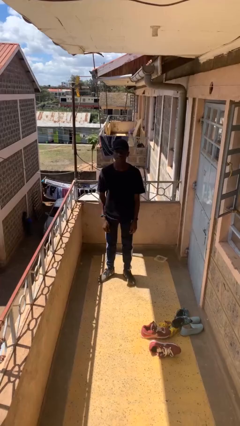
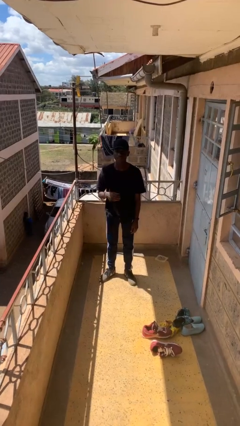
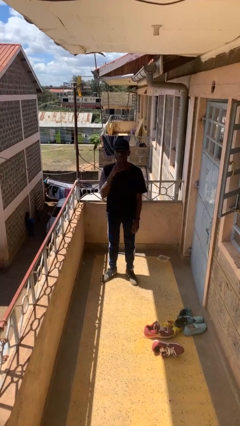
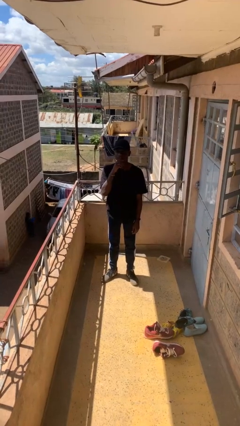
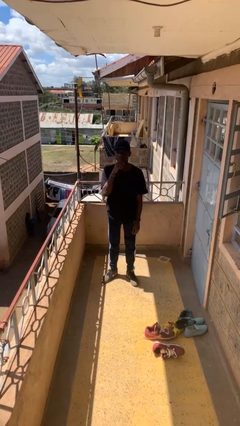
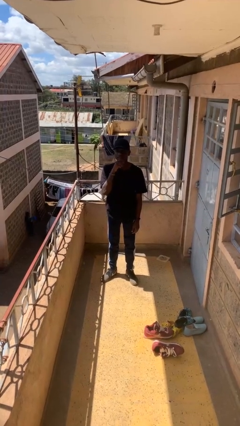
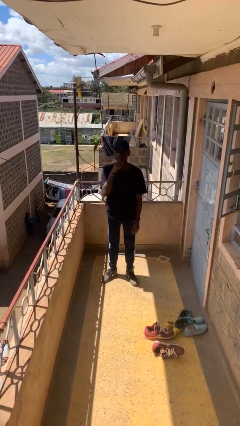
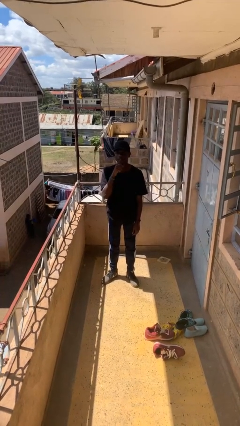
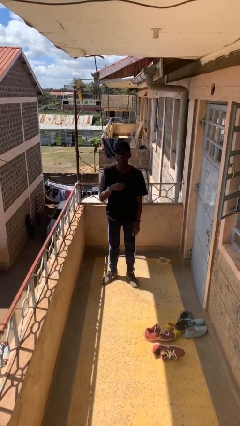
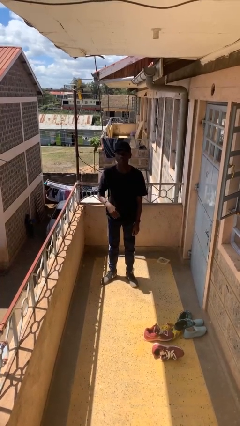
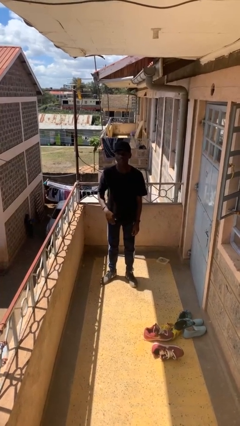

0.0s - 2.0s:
person strokes chin

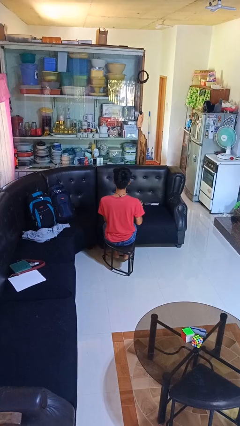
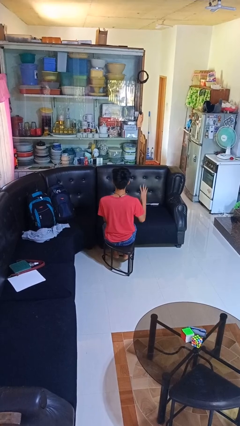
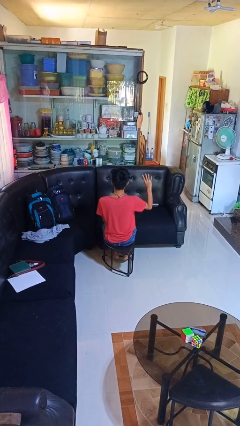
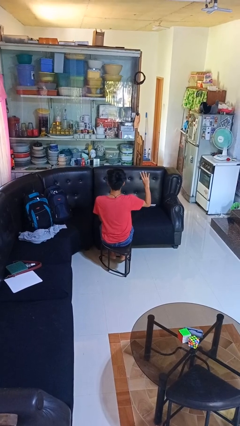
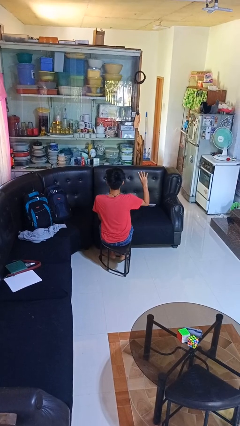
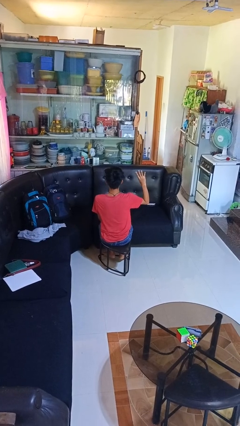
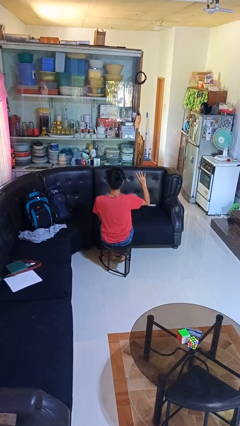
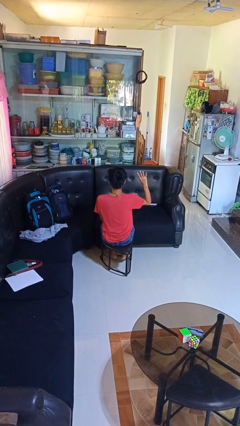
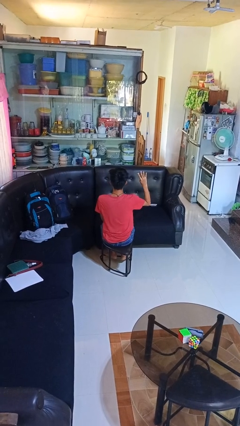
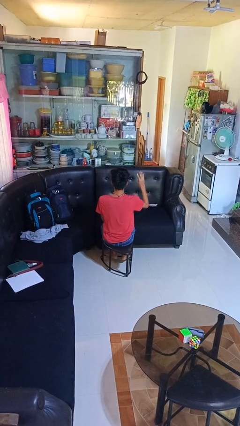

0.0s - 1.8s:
person gestures number four

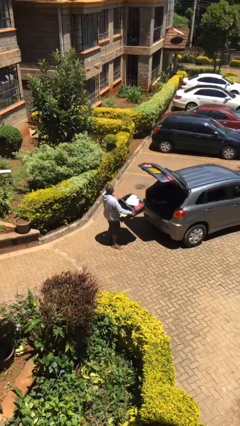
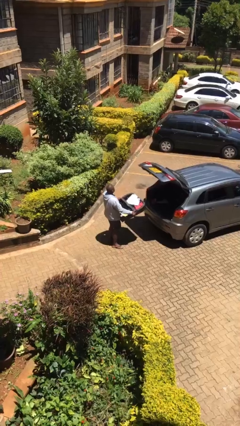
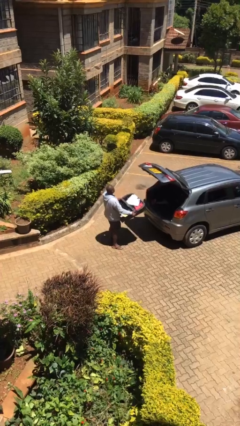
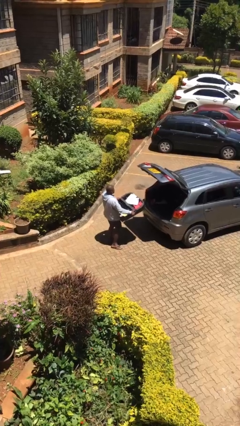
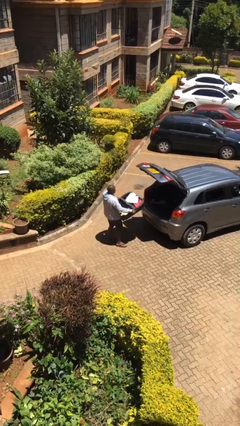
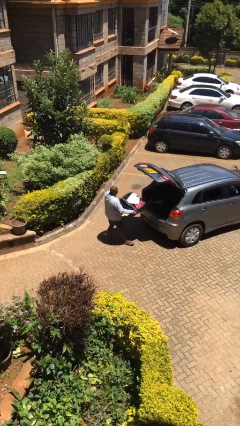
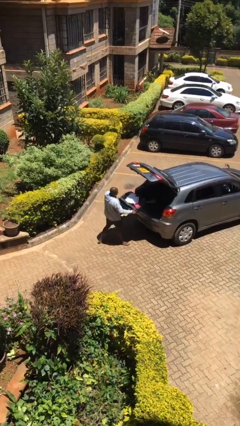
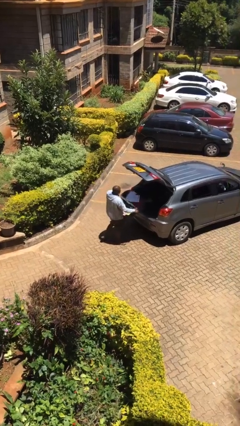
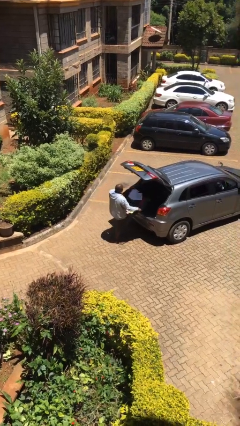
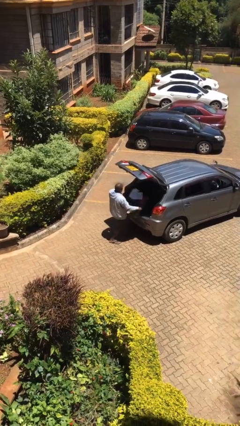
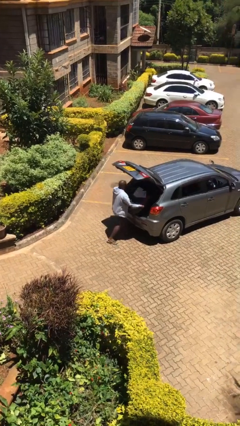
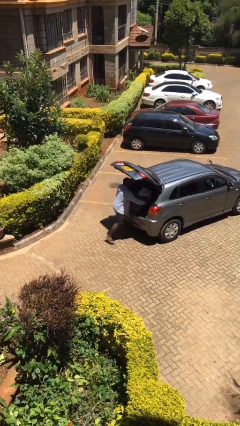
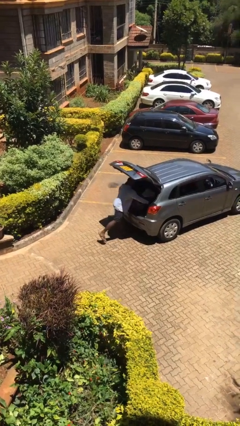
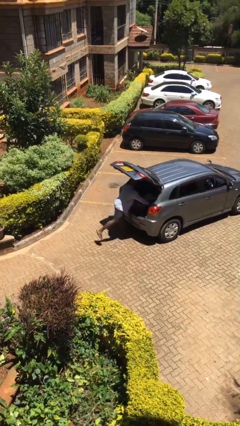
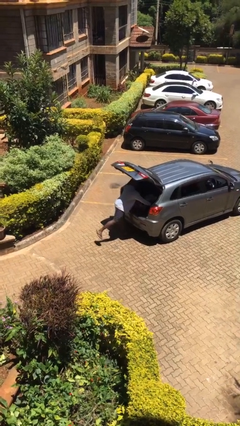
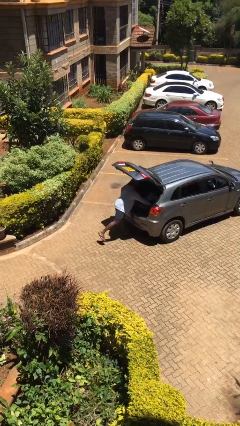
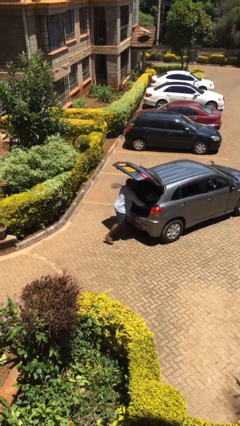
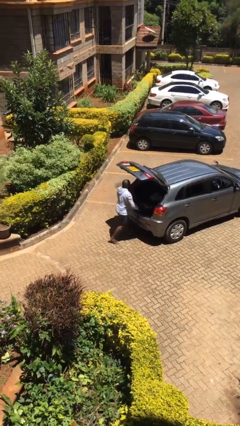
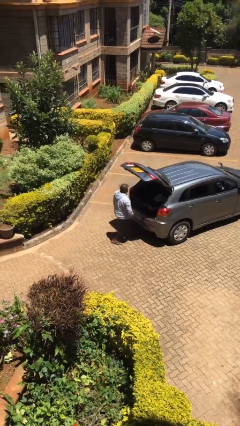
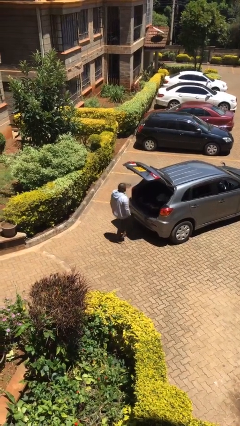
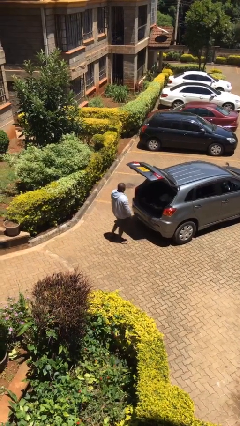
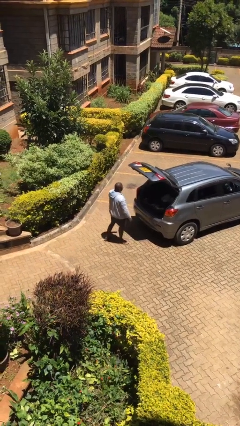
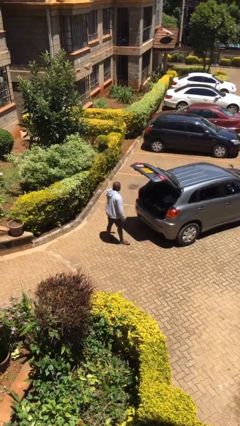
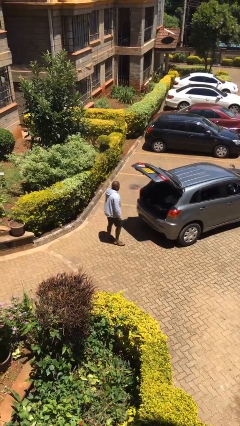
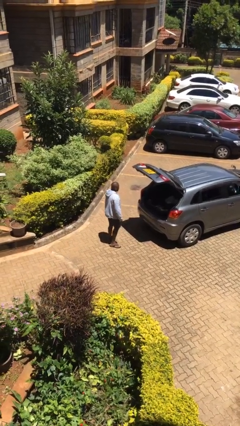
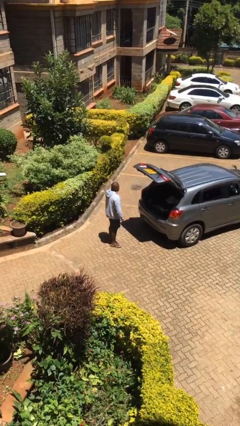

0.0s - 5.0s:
person loads car

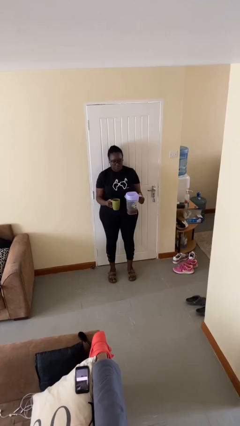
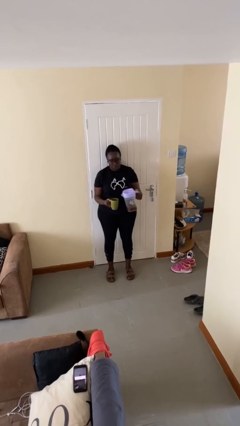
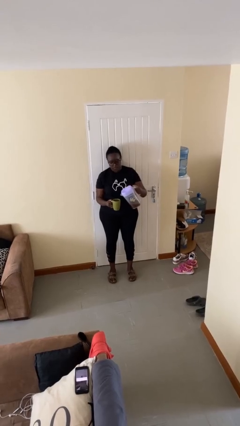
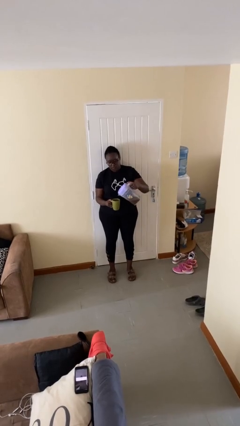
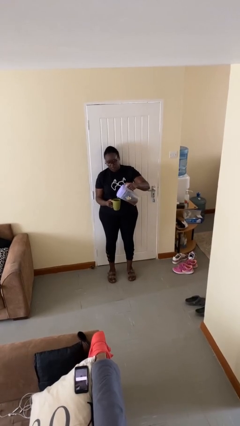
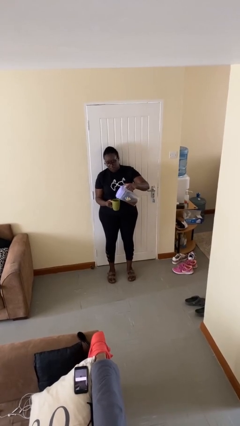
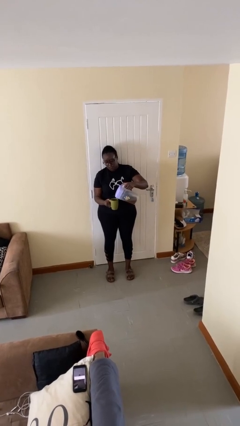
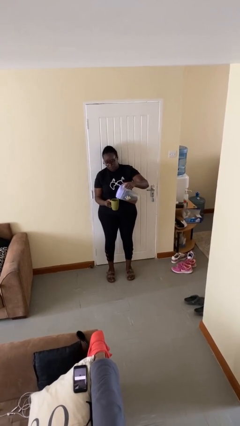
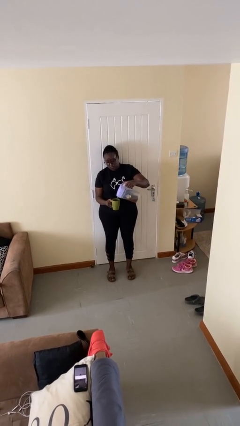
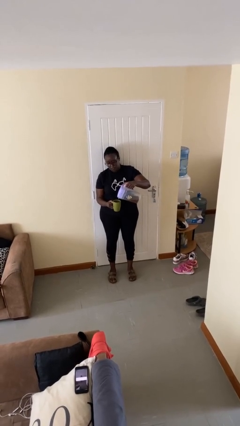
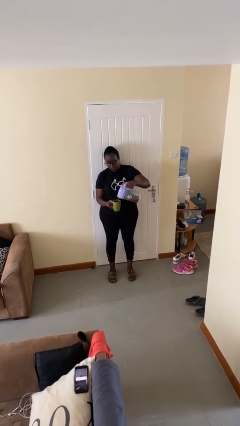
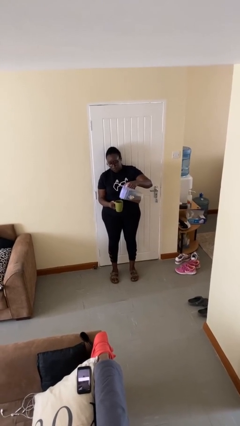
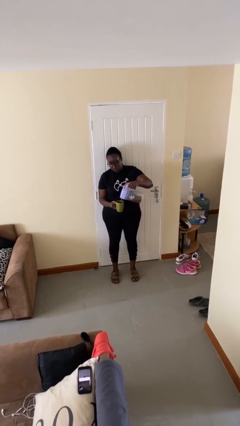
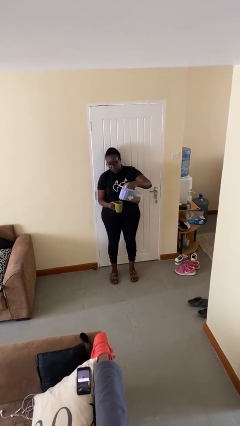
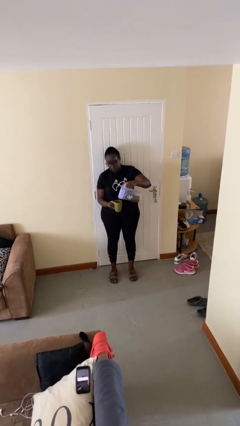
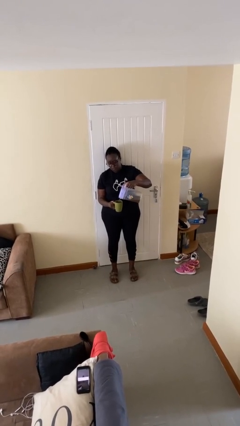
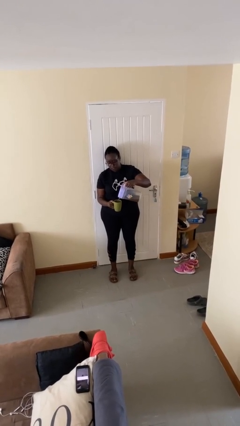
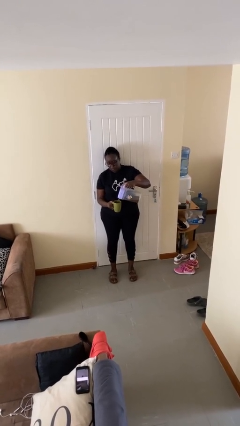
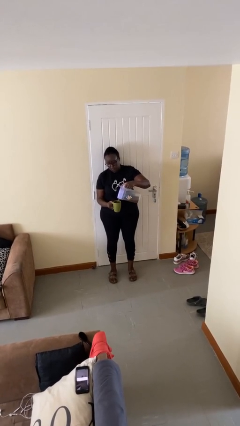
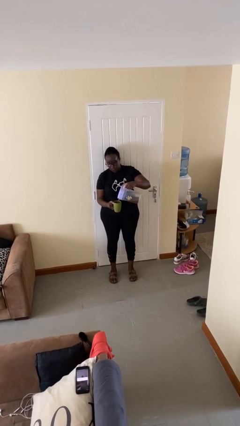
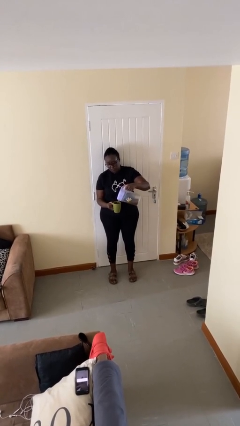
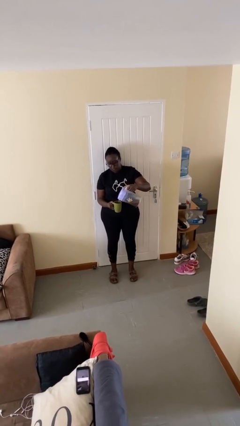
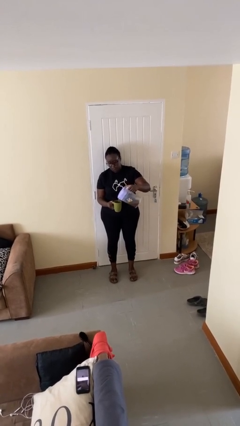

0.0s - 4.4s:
person pours coffee into mug

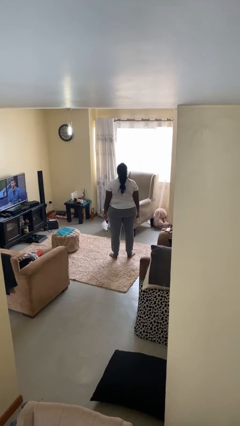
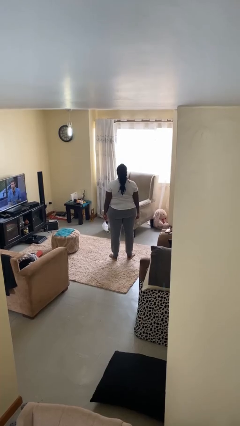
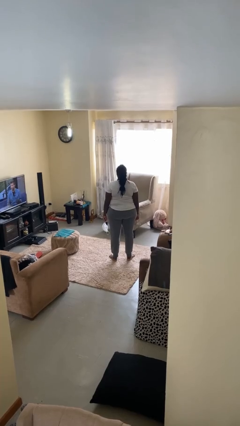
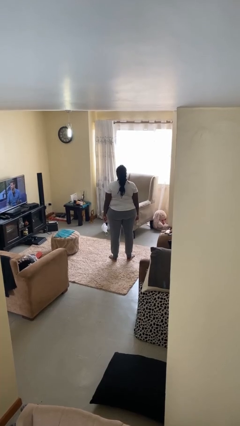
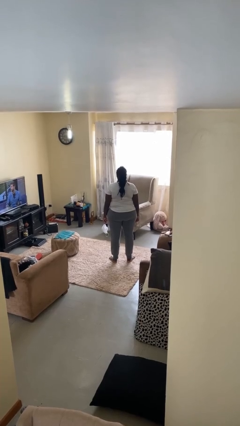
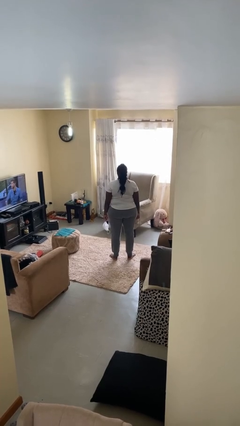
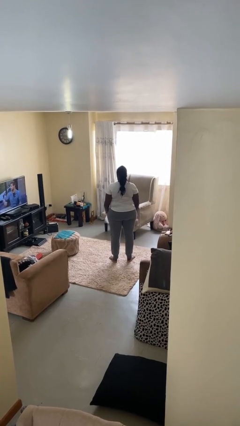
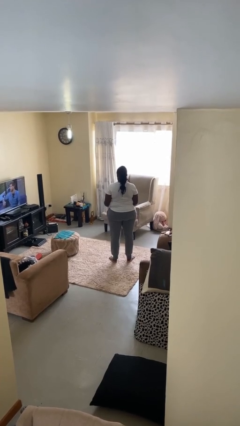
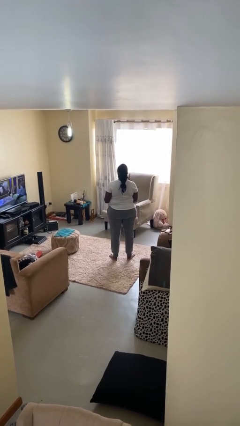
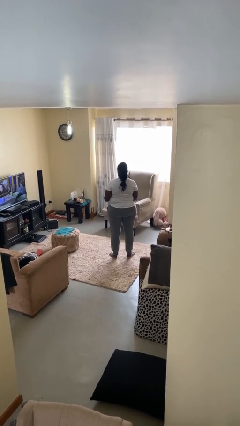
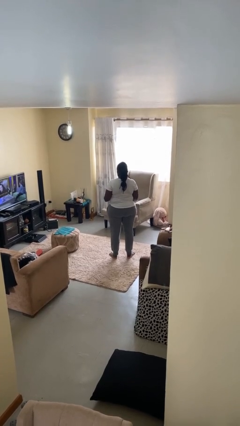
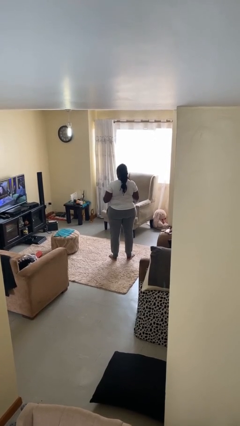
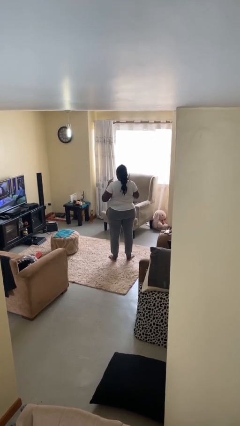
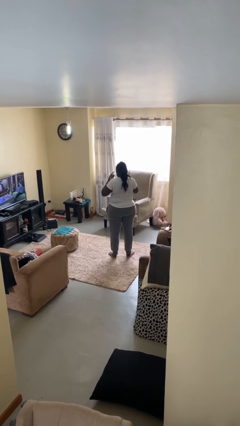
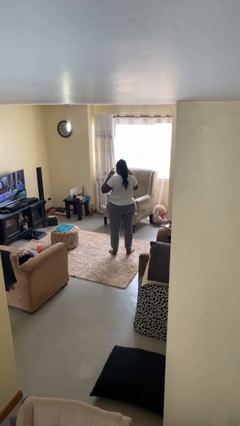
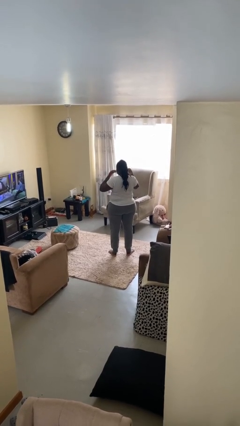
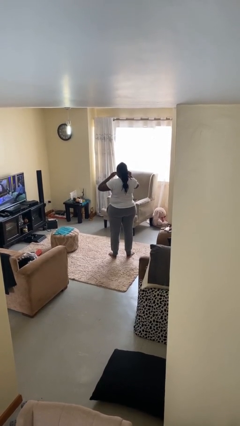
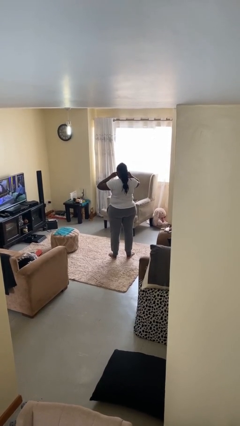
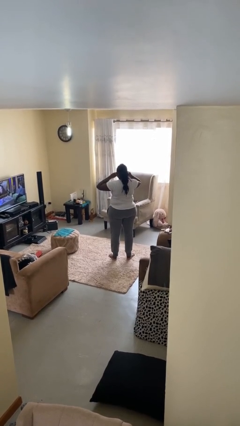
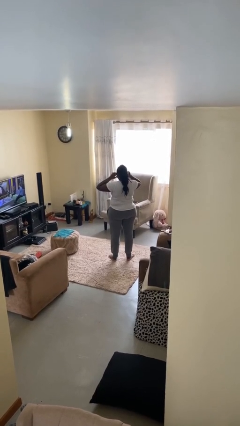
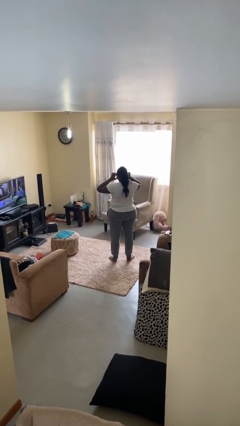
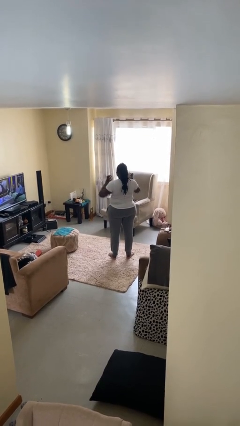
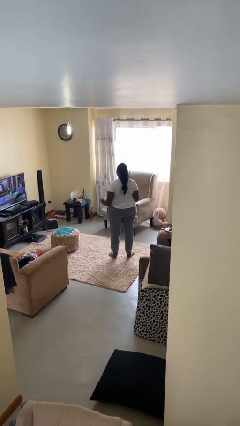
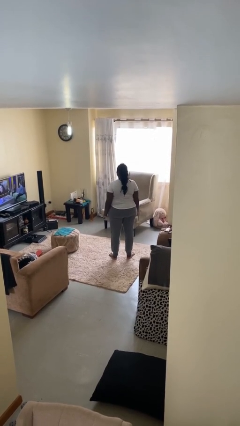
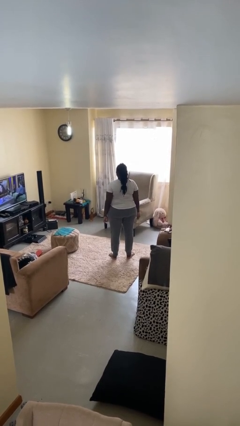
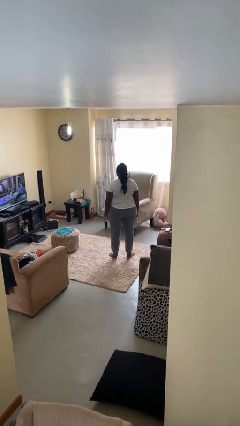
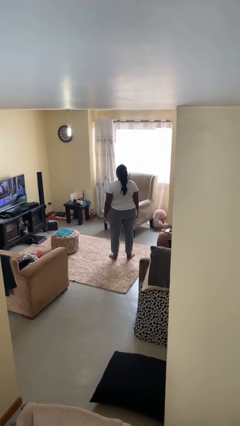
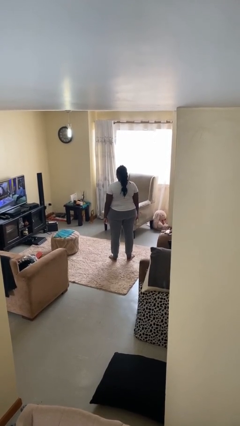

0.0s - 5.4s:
person puts on facemask
